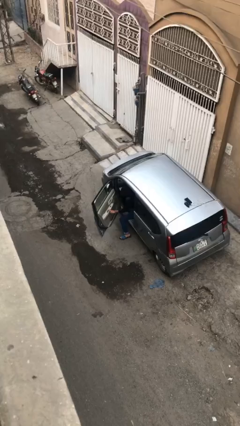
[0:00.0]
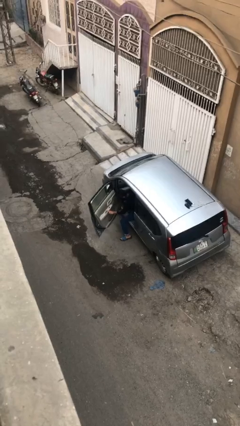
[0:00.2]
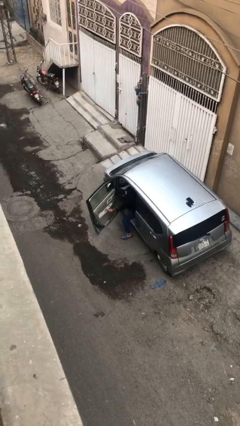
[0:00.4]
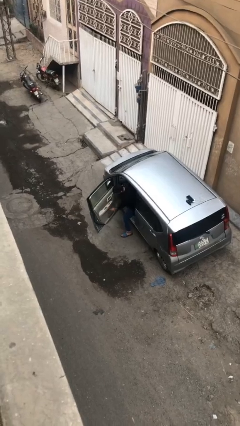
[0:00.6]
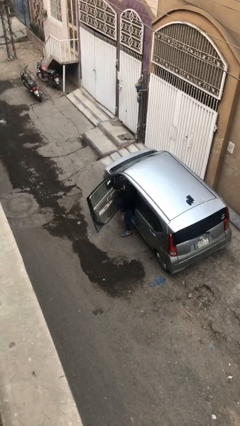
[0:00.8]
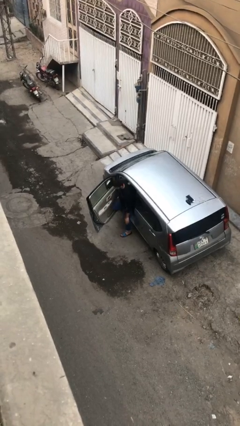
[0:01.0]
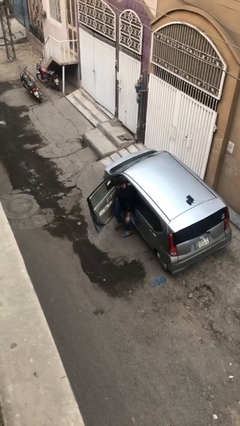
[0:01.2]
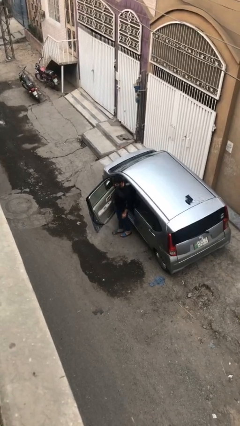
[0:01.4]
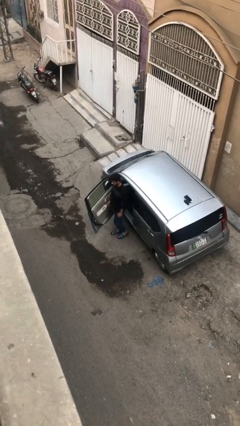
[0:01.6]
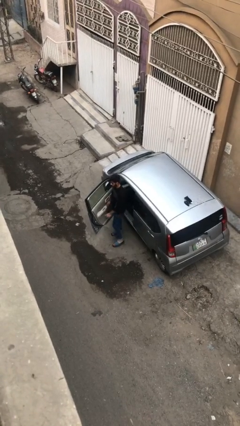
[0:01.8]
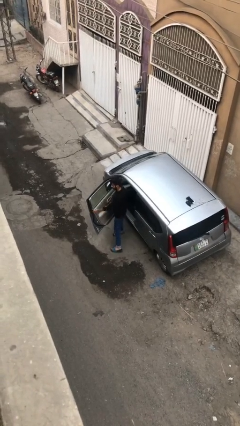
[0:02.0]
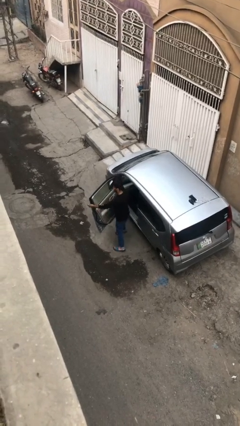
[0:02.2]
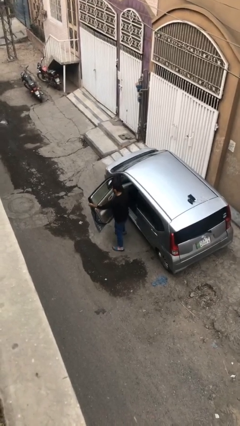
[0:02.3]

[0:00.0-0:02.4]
person exits car

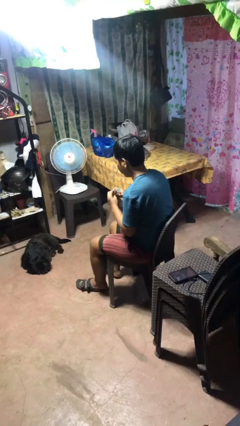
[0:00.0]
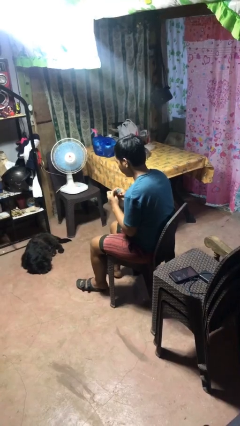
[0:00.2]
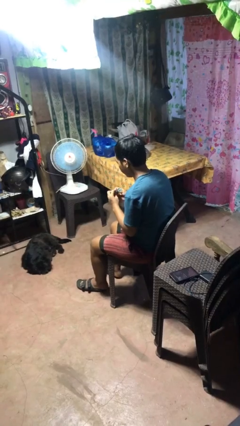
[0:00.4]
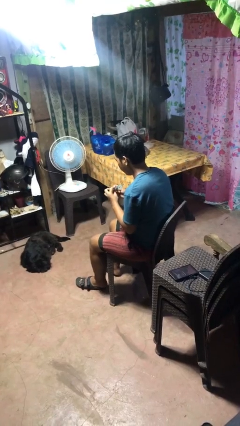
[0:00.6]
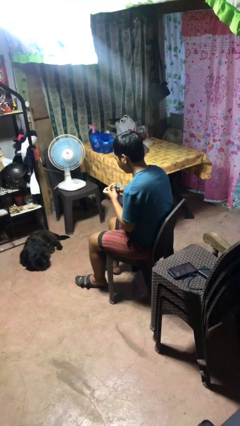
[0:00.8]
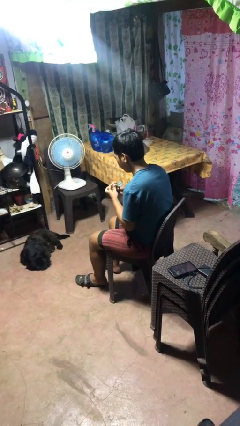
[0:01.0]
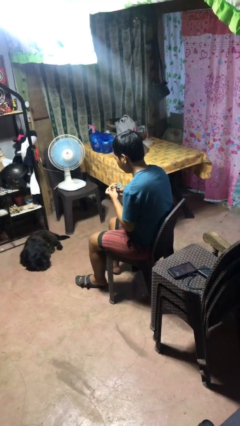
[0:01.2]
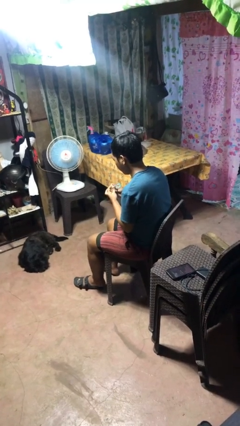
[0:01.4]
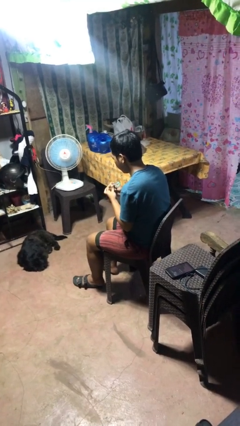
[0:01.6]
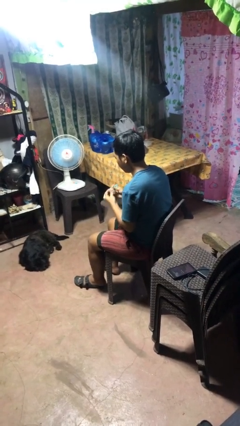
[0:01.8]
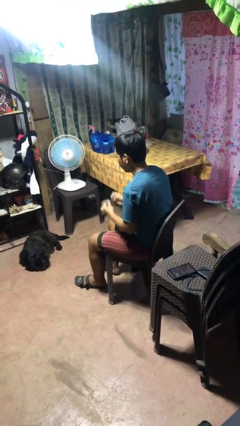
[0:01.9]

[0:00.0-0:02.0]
person files fingernails

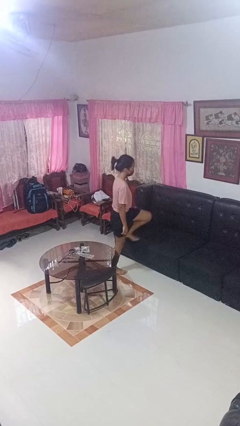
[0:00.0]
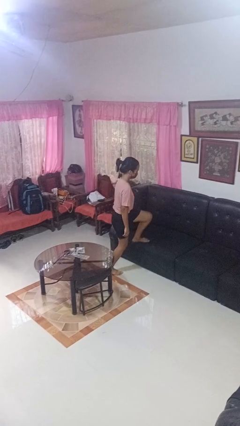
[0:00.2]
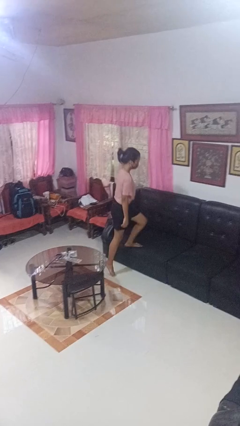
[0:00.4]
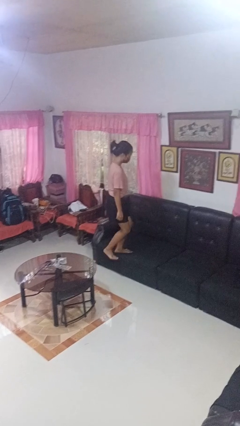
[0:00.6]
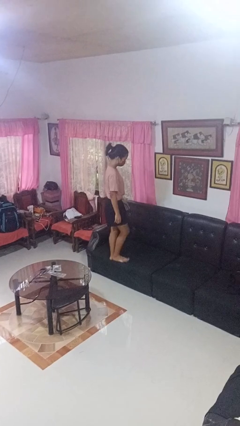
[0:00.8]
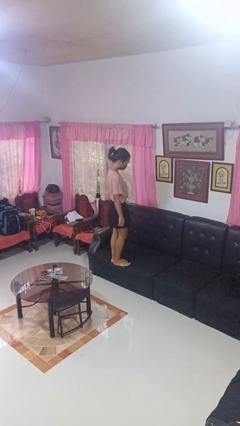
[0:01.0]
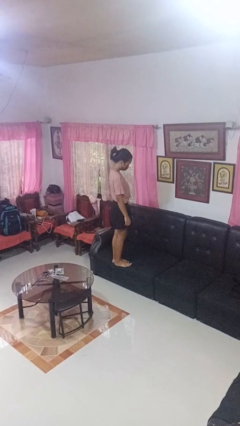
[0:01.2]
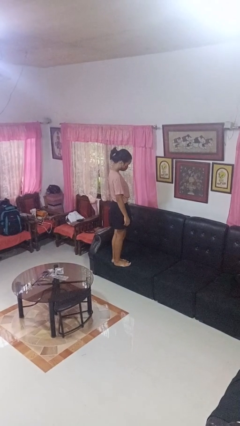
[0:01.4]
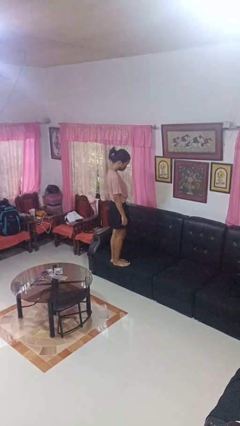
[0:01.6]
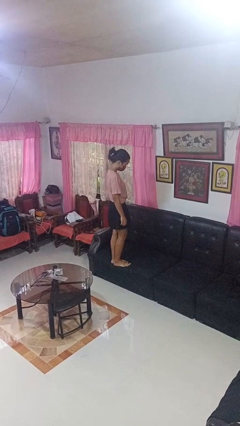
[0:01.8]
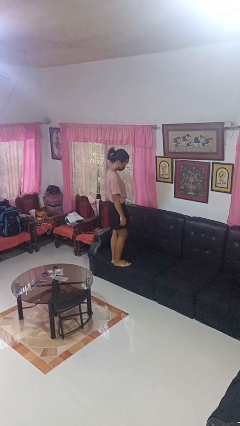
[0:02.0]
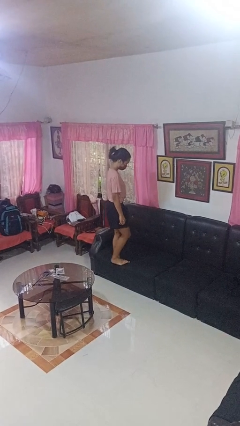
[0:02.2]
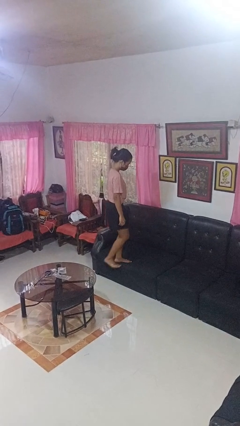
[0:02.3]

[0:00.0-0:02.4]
person climbs on couch

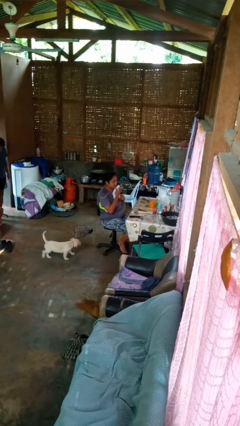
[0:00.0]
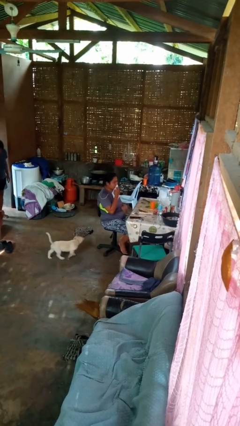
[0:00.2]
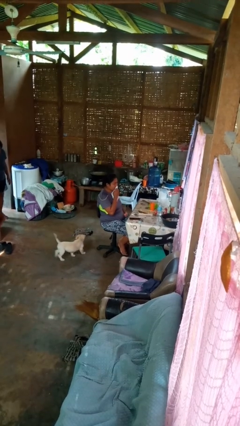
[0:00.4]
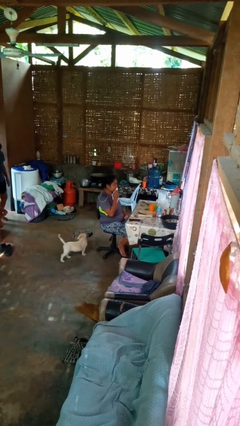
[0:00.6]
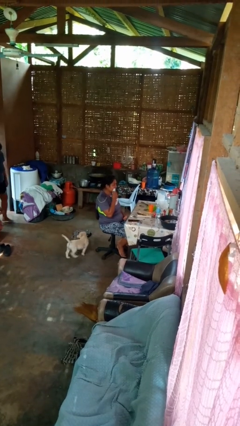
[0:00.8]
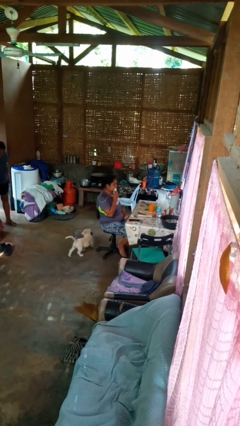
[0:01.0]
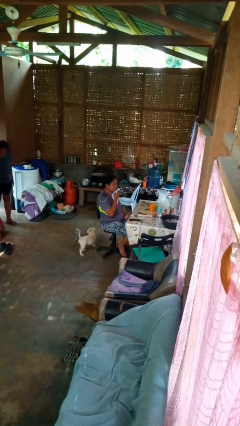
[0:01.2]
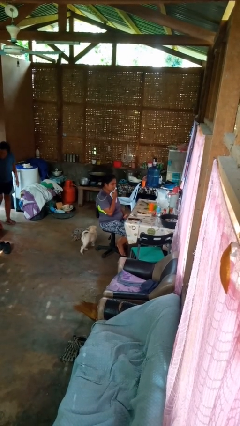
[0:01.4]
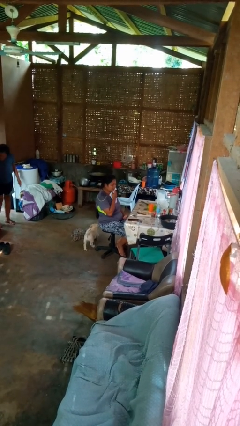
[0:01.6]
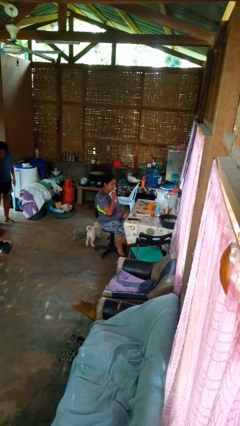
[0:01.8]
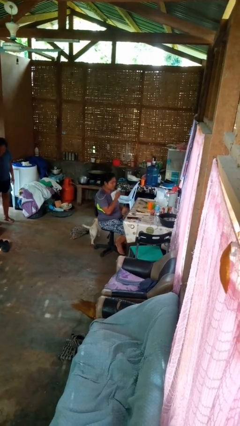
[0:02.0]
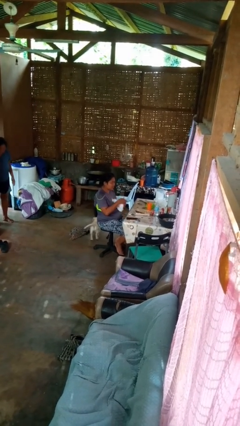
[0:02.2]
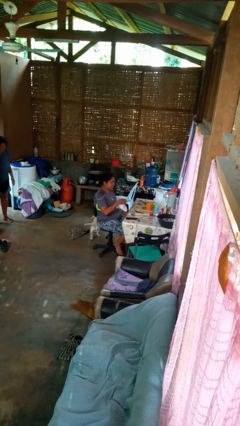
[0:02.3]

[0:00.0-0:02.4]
person wipes mouth with napkin

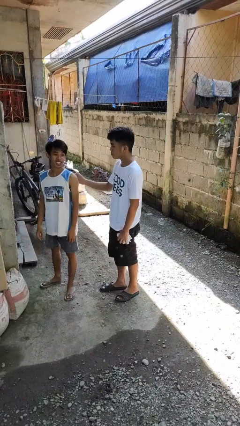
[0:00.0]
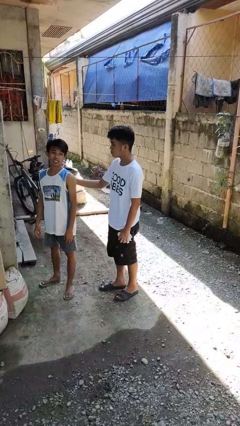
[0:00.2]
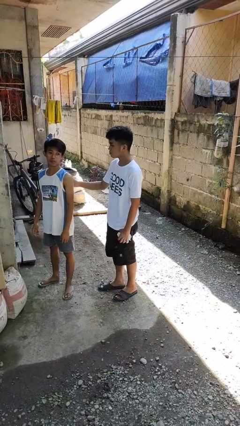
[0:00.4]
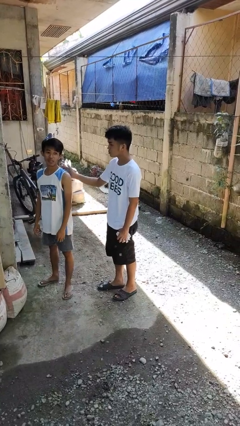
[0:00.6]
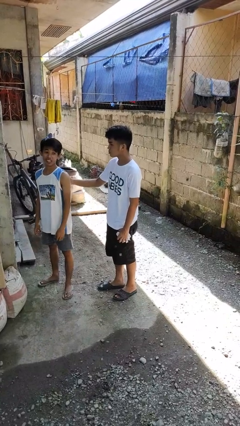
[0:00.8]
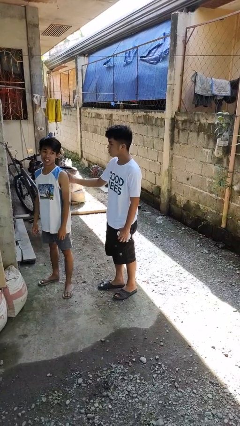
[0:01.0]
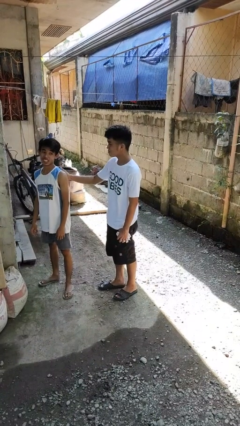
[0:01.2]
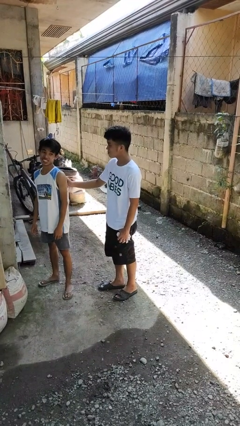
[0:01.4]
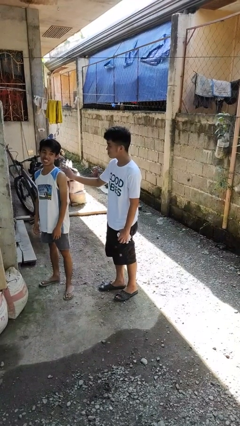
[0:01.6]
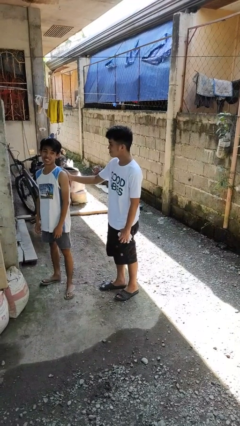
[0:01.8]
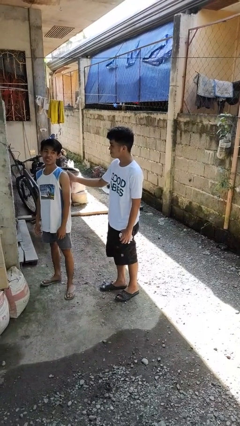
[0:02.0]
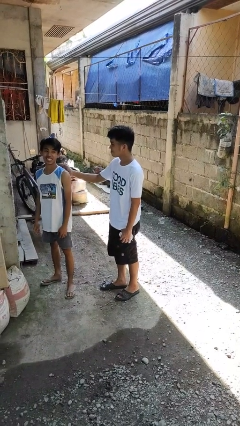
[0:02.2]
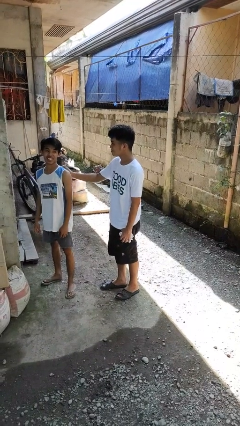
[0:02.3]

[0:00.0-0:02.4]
person touches back of person

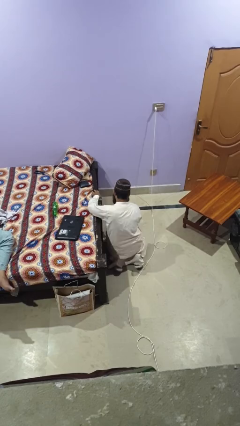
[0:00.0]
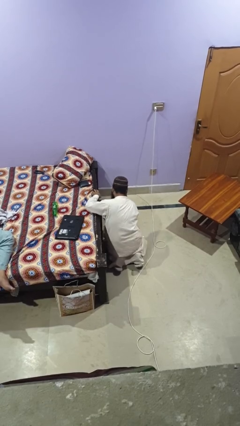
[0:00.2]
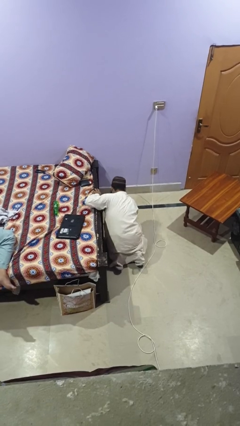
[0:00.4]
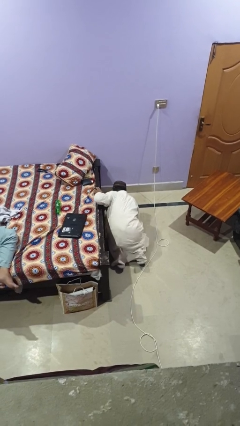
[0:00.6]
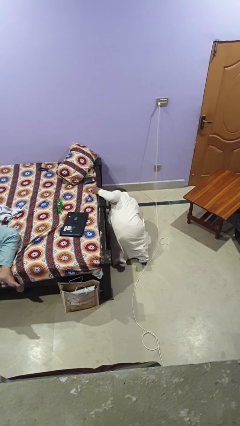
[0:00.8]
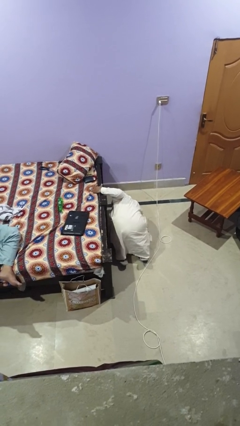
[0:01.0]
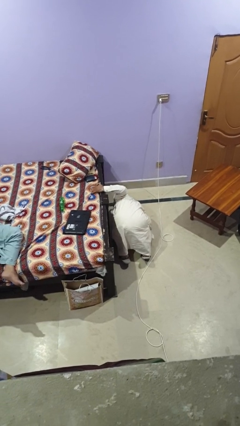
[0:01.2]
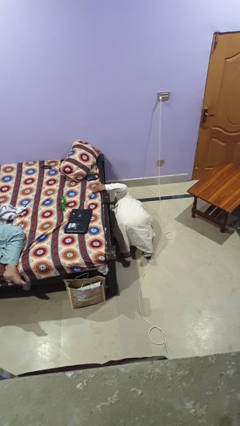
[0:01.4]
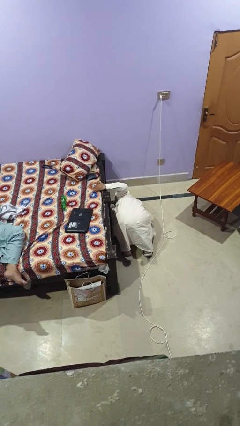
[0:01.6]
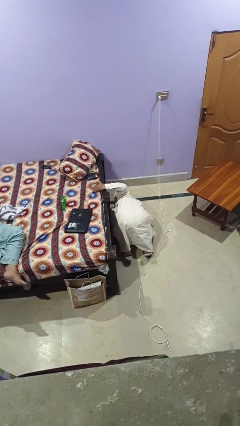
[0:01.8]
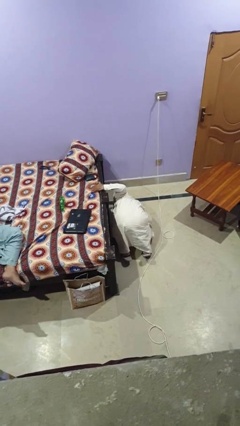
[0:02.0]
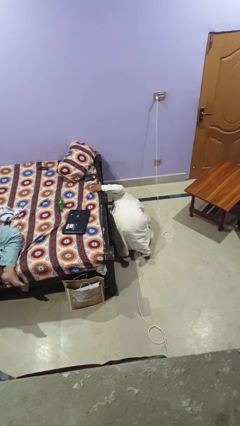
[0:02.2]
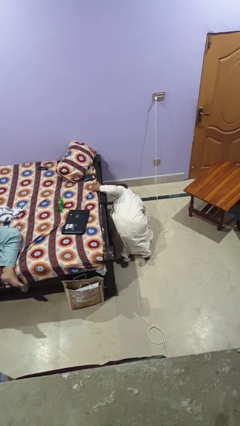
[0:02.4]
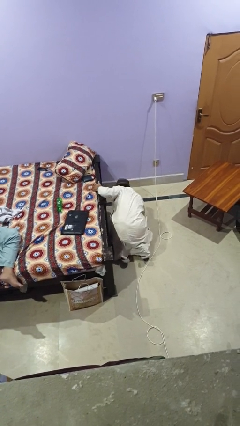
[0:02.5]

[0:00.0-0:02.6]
person searches under bed

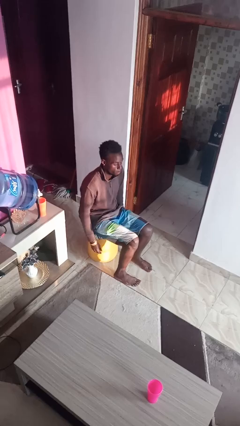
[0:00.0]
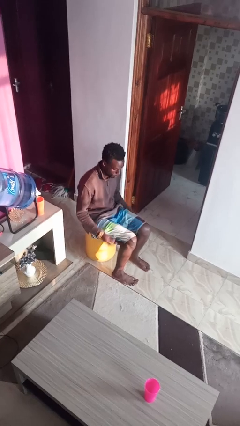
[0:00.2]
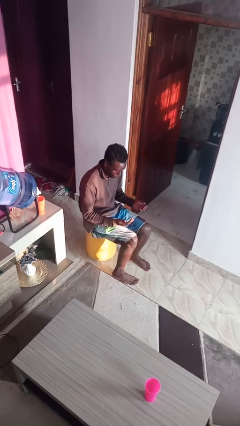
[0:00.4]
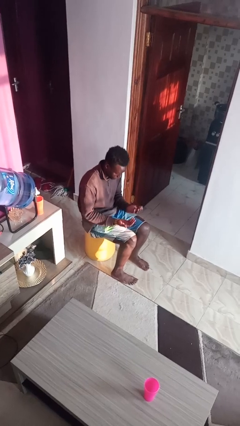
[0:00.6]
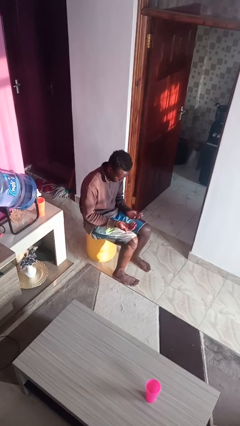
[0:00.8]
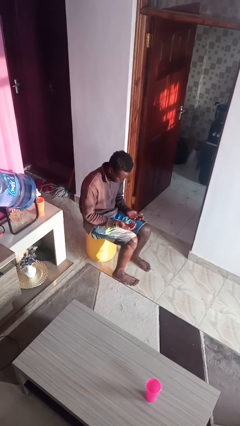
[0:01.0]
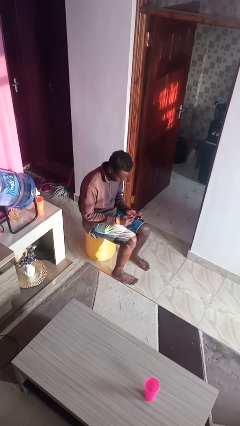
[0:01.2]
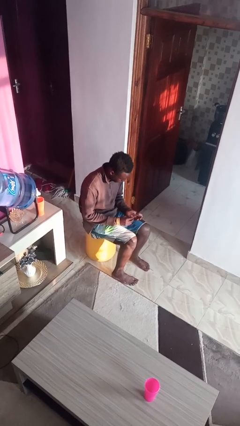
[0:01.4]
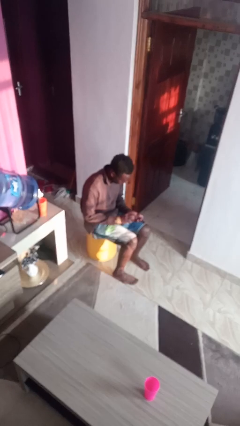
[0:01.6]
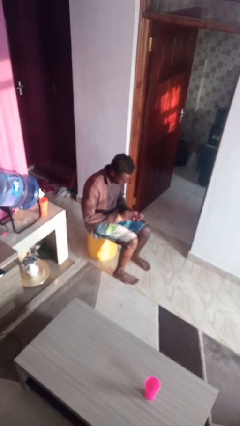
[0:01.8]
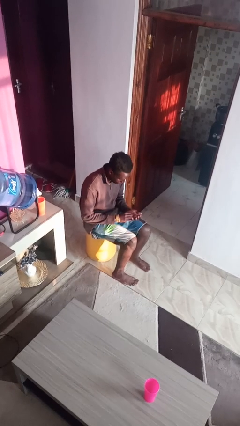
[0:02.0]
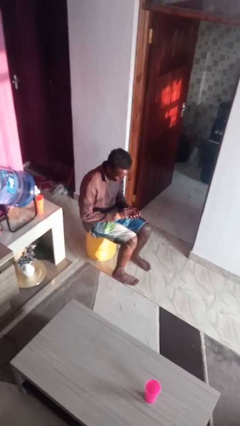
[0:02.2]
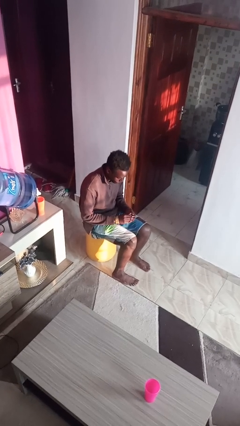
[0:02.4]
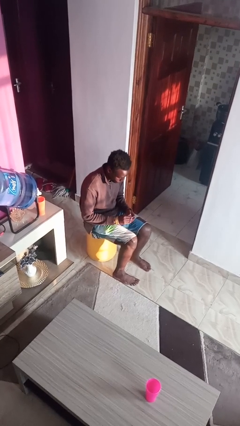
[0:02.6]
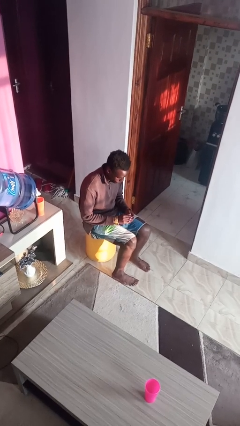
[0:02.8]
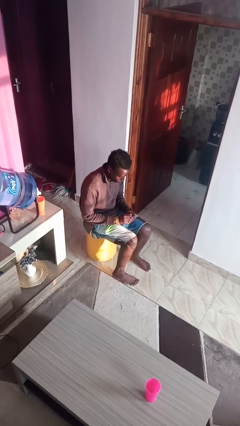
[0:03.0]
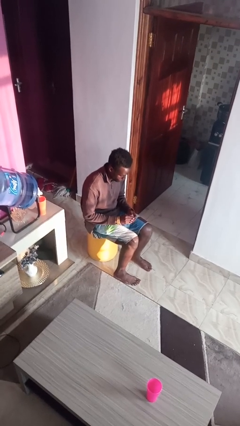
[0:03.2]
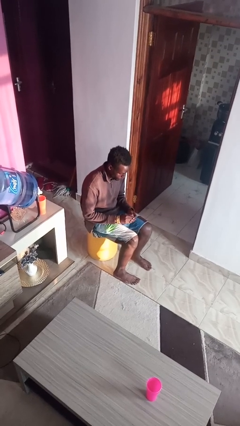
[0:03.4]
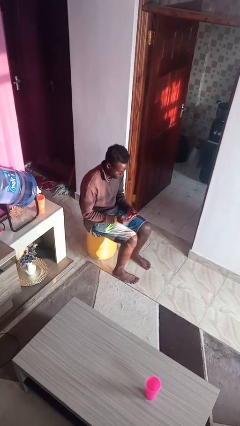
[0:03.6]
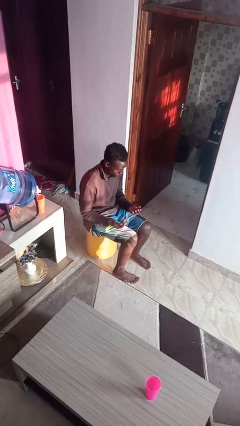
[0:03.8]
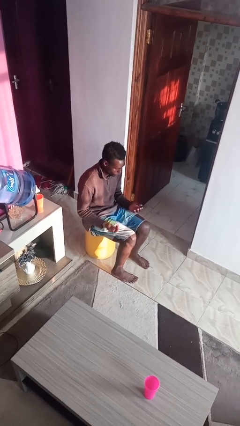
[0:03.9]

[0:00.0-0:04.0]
person looks at hands in lap
